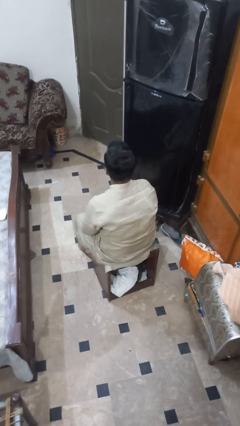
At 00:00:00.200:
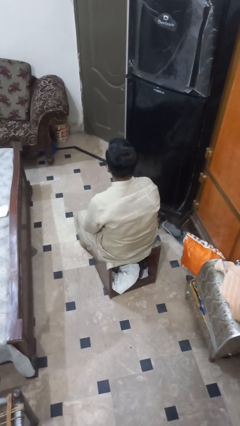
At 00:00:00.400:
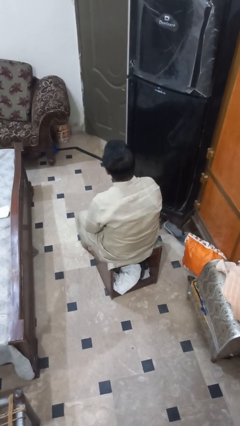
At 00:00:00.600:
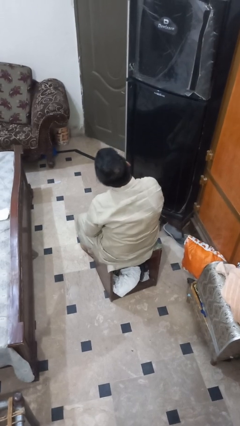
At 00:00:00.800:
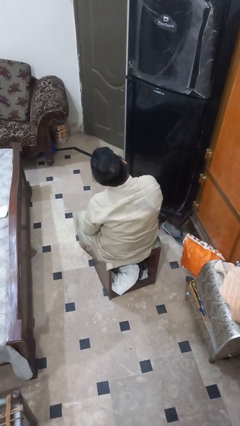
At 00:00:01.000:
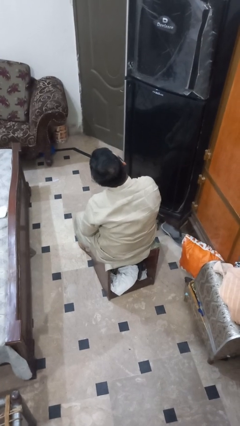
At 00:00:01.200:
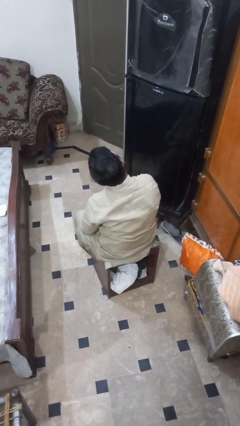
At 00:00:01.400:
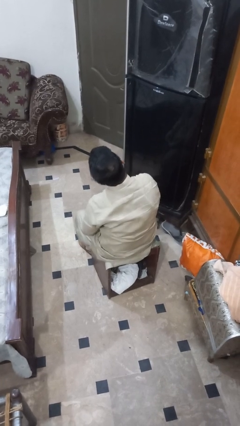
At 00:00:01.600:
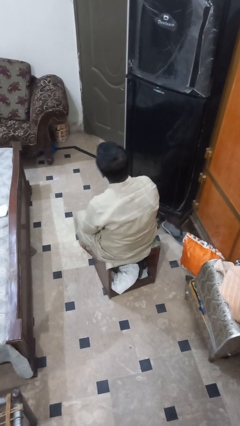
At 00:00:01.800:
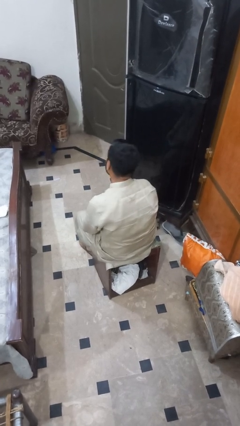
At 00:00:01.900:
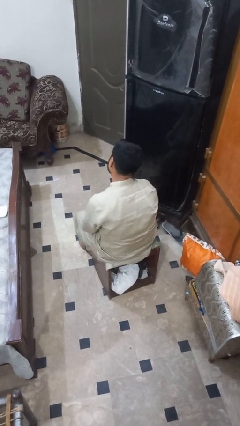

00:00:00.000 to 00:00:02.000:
person sticks out tongue

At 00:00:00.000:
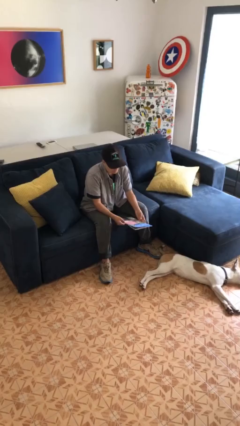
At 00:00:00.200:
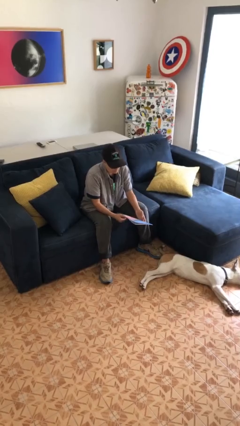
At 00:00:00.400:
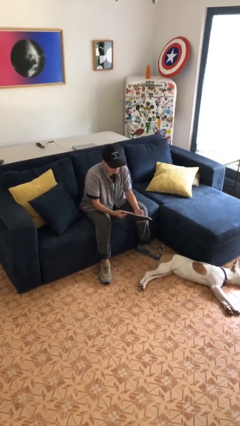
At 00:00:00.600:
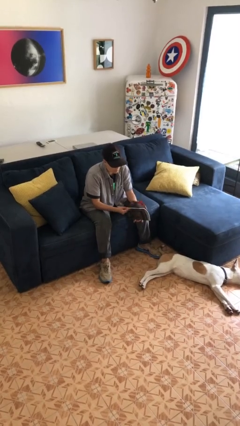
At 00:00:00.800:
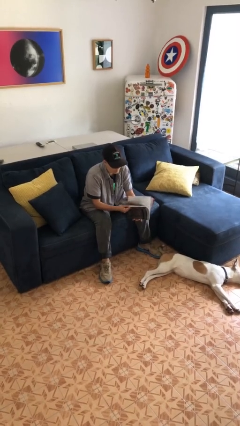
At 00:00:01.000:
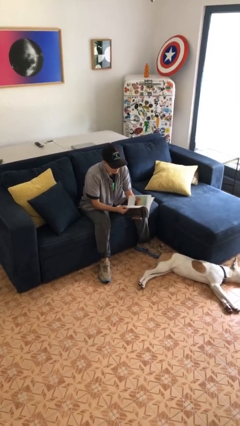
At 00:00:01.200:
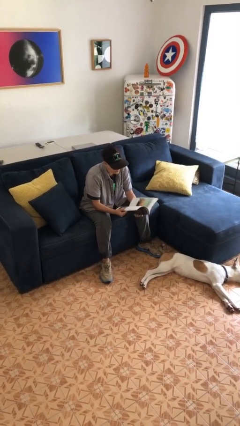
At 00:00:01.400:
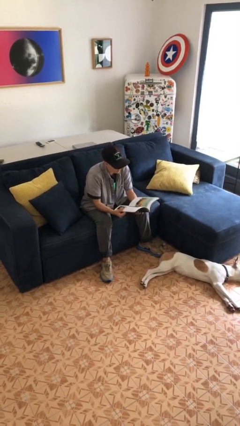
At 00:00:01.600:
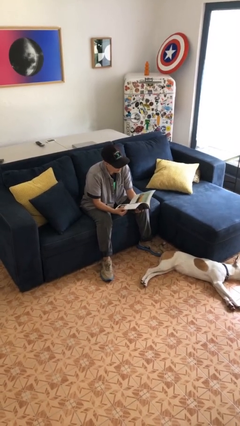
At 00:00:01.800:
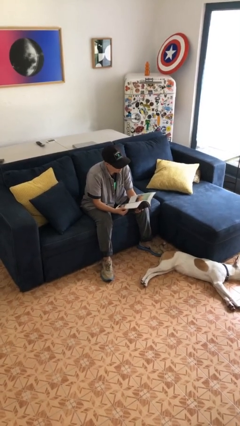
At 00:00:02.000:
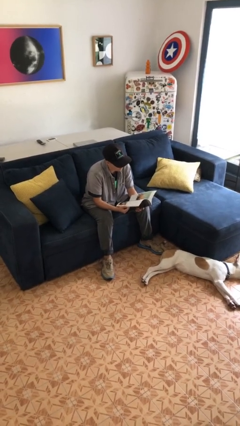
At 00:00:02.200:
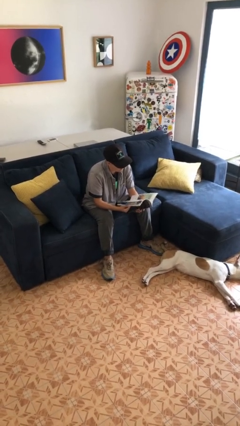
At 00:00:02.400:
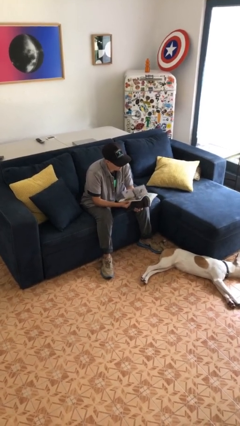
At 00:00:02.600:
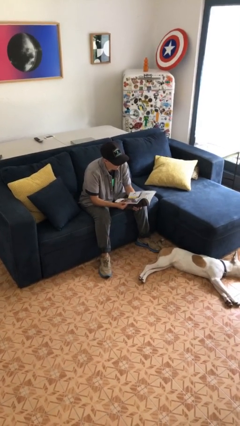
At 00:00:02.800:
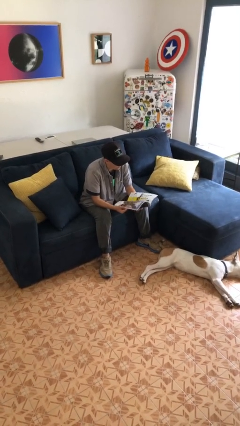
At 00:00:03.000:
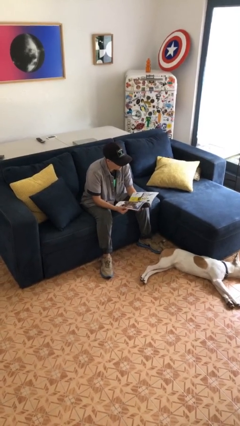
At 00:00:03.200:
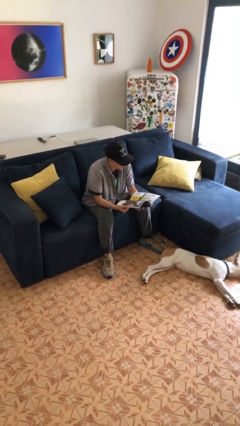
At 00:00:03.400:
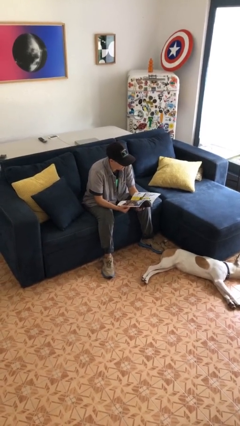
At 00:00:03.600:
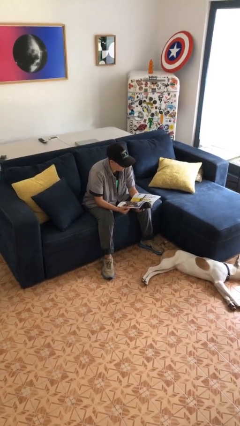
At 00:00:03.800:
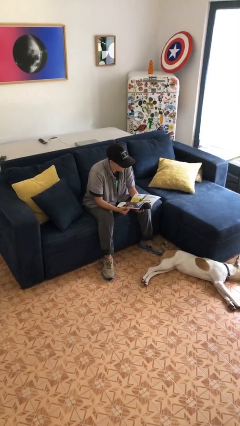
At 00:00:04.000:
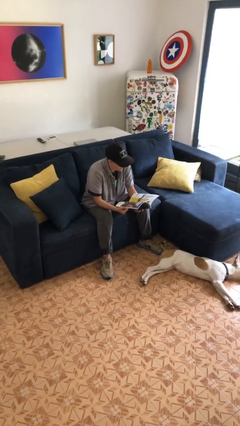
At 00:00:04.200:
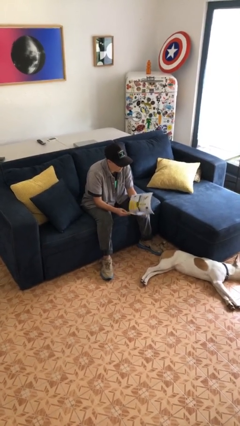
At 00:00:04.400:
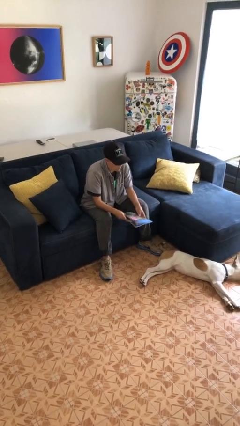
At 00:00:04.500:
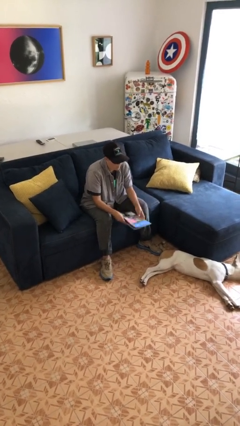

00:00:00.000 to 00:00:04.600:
person reads magazine

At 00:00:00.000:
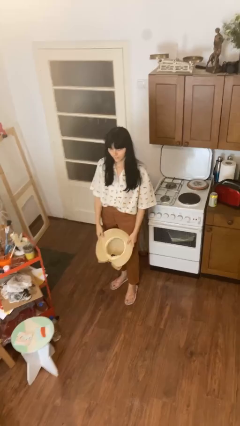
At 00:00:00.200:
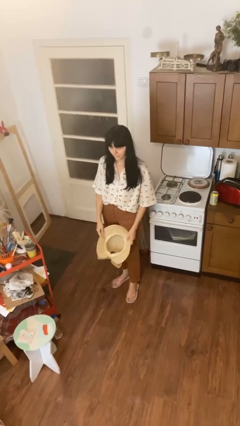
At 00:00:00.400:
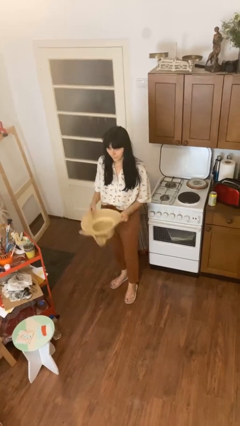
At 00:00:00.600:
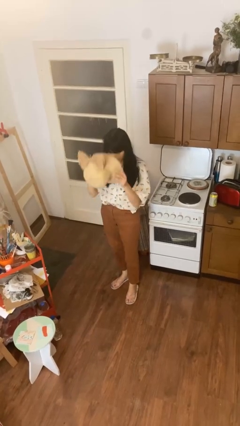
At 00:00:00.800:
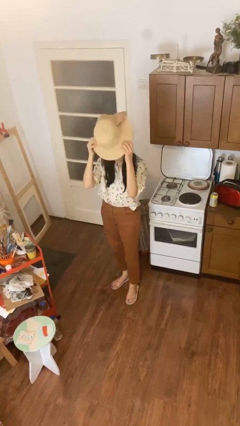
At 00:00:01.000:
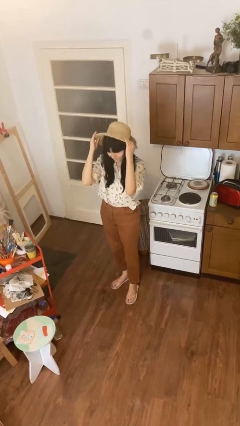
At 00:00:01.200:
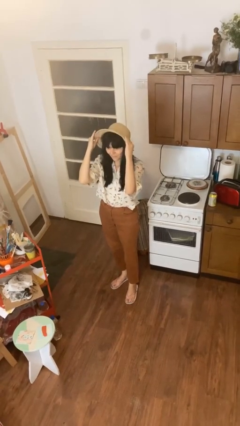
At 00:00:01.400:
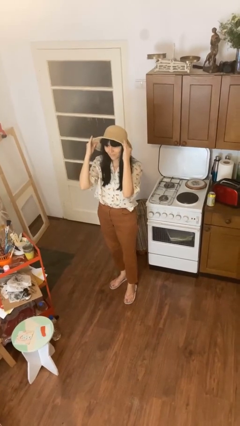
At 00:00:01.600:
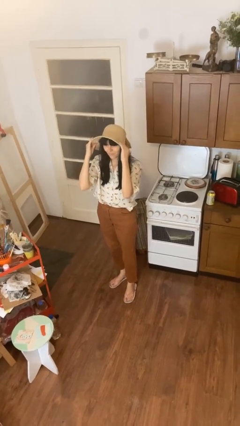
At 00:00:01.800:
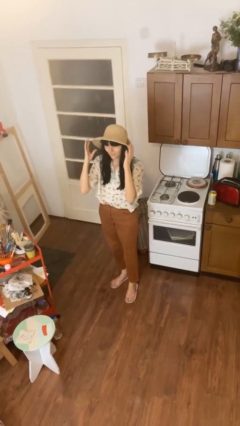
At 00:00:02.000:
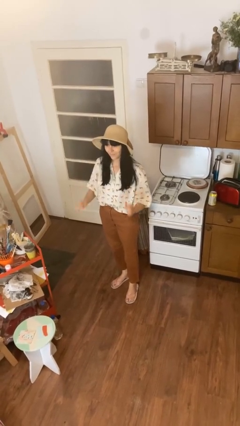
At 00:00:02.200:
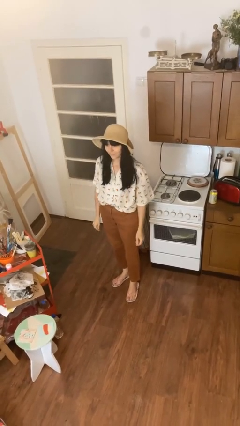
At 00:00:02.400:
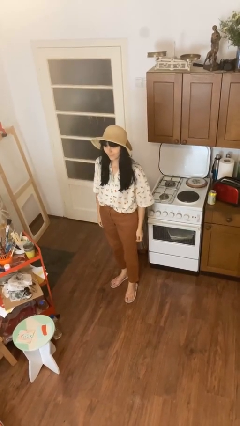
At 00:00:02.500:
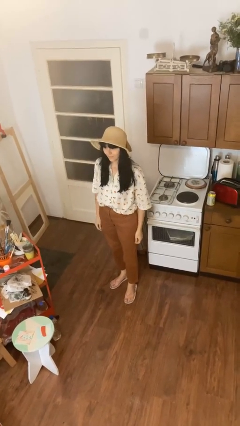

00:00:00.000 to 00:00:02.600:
person puts on hat

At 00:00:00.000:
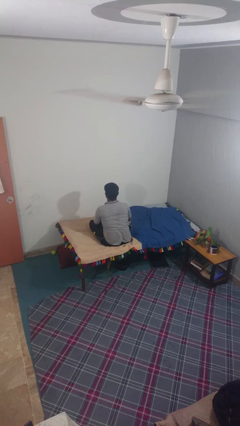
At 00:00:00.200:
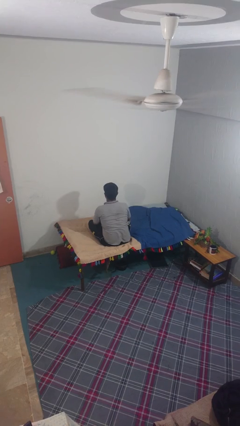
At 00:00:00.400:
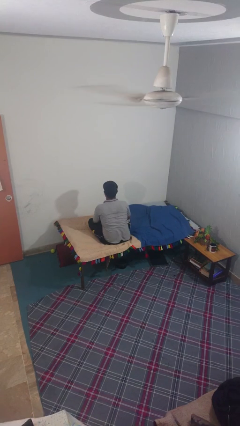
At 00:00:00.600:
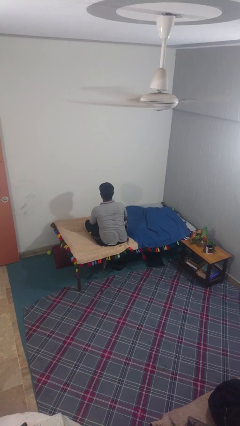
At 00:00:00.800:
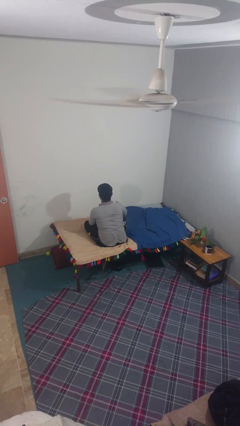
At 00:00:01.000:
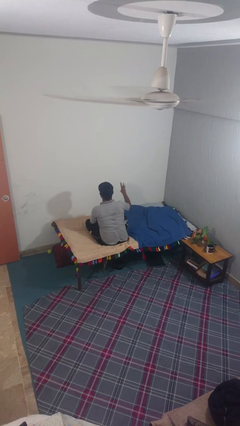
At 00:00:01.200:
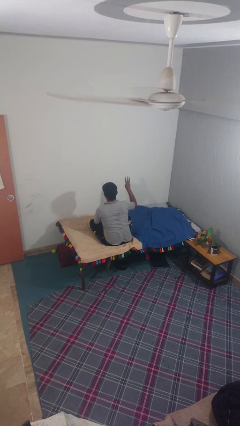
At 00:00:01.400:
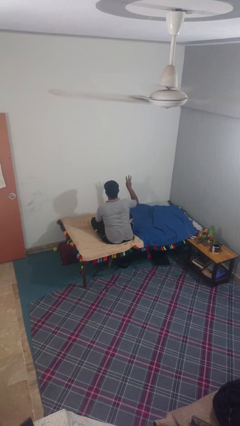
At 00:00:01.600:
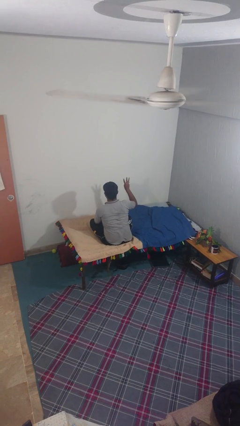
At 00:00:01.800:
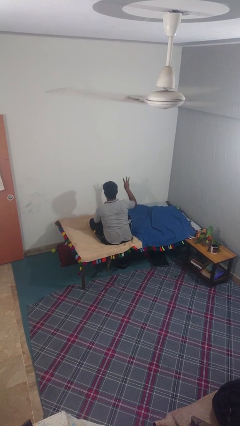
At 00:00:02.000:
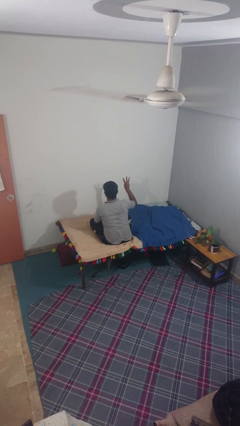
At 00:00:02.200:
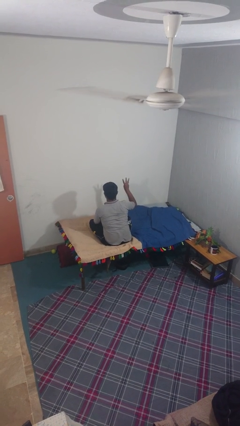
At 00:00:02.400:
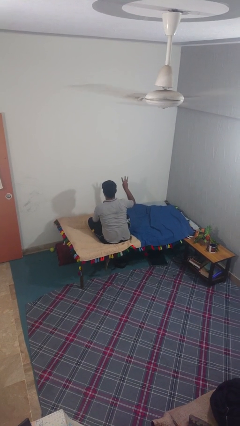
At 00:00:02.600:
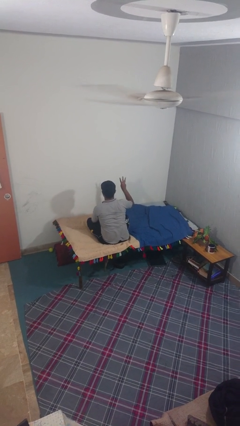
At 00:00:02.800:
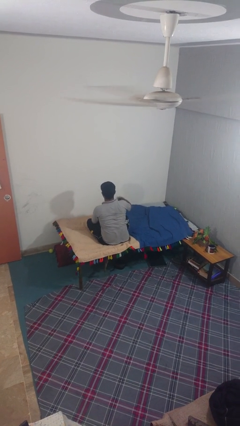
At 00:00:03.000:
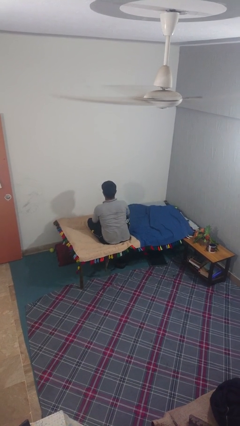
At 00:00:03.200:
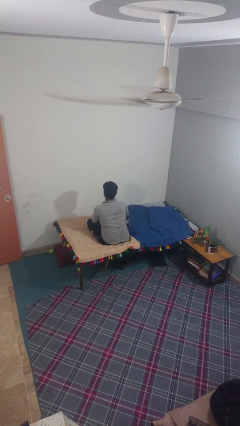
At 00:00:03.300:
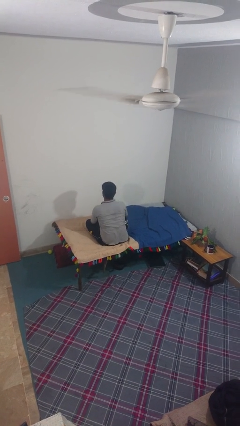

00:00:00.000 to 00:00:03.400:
person gestures number three

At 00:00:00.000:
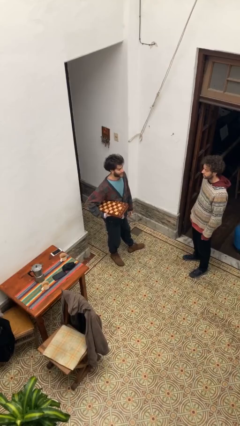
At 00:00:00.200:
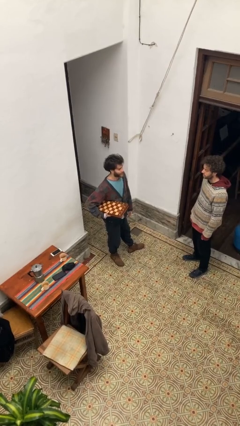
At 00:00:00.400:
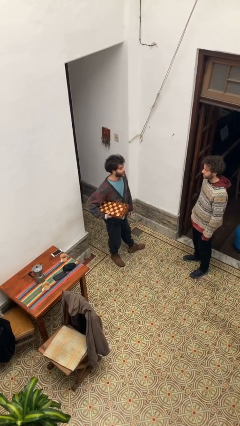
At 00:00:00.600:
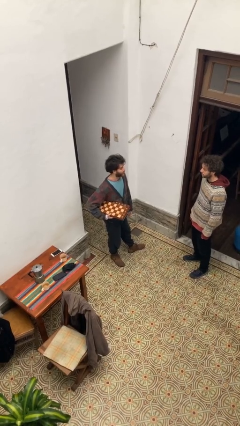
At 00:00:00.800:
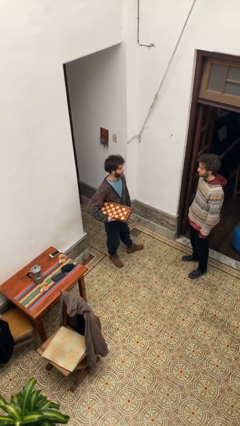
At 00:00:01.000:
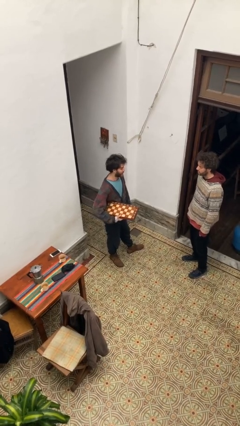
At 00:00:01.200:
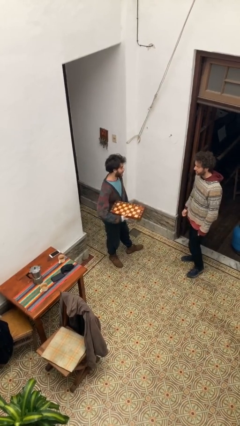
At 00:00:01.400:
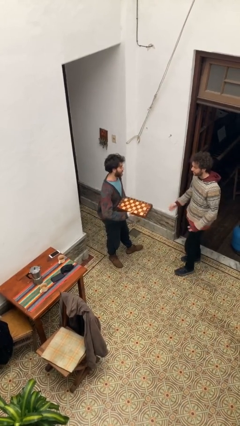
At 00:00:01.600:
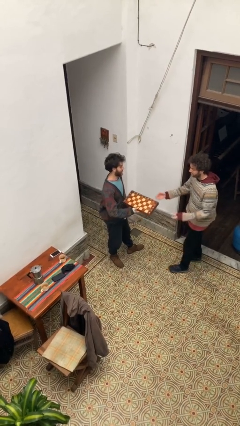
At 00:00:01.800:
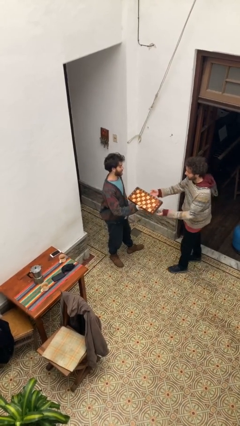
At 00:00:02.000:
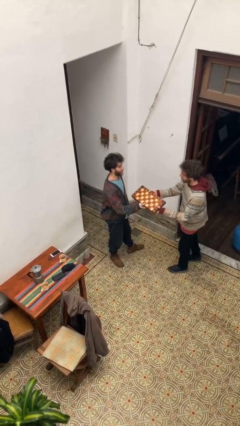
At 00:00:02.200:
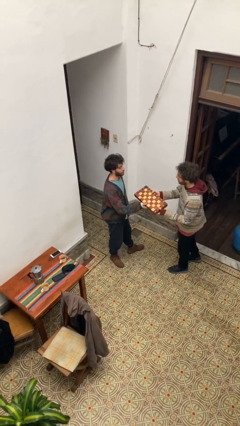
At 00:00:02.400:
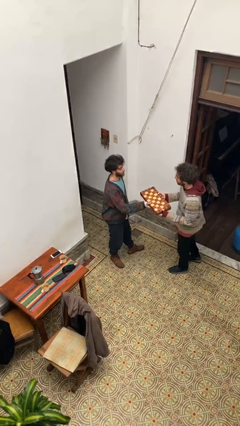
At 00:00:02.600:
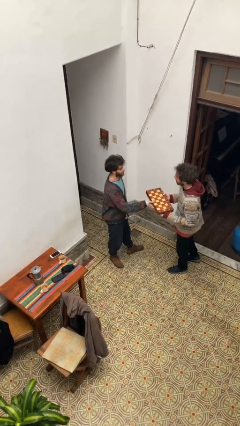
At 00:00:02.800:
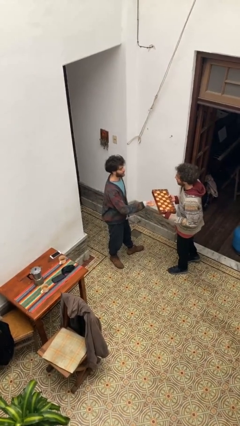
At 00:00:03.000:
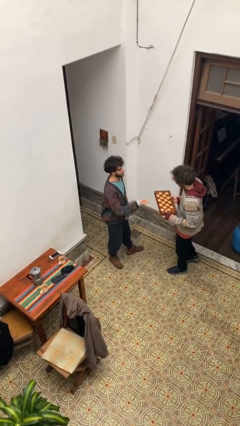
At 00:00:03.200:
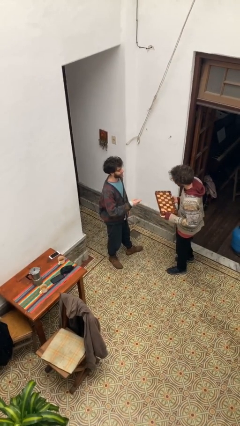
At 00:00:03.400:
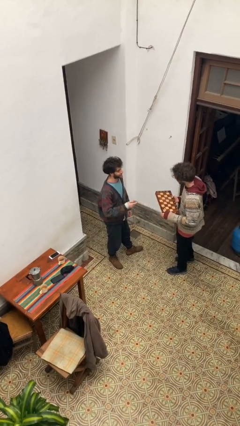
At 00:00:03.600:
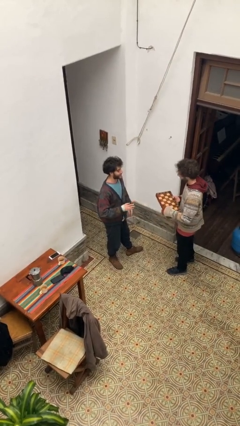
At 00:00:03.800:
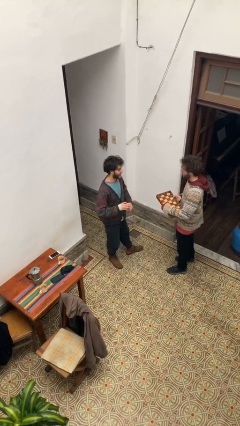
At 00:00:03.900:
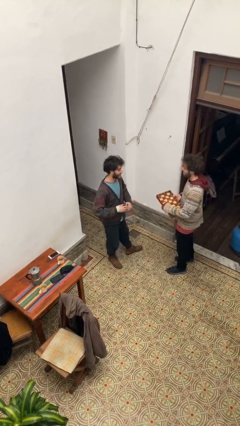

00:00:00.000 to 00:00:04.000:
person transfers object to person

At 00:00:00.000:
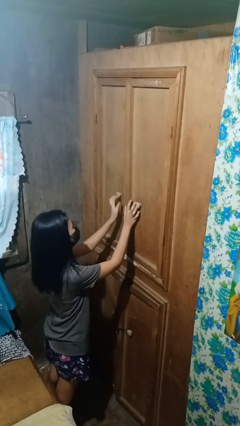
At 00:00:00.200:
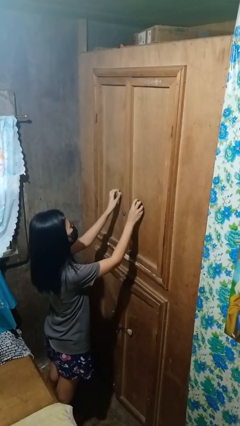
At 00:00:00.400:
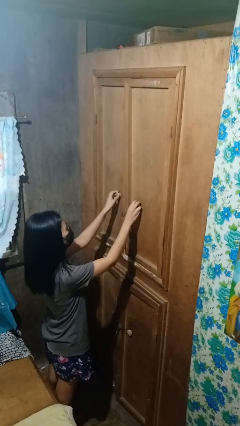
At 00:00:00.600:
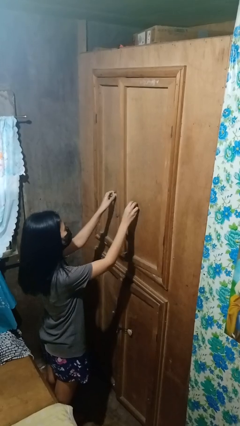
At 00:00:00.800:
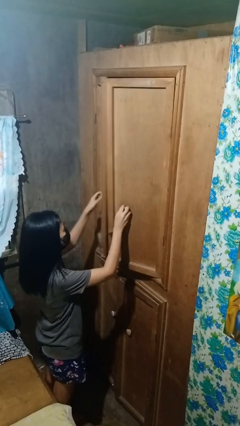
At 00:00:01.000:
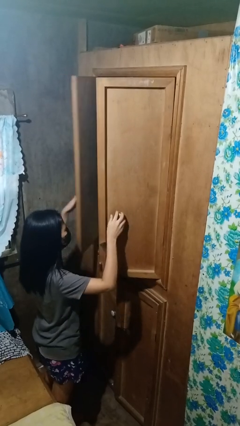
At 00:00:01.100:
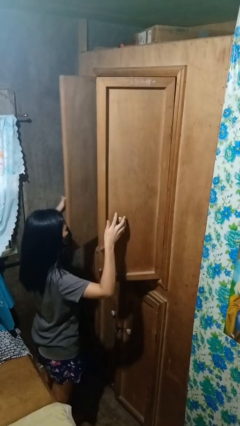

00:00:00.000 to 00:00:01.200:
person opens closet door
